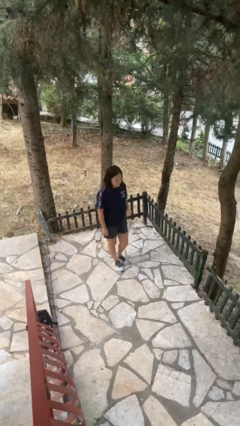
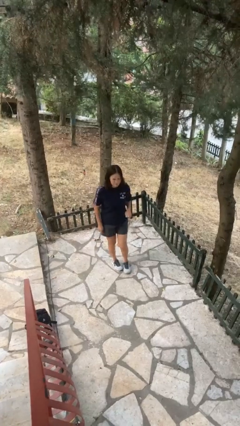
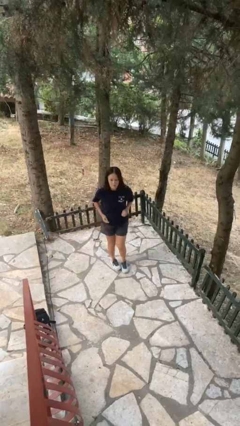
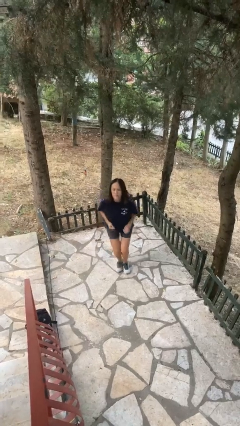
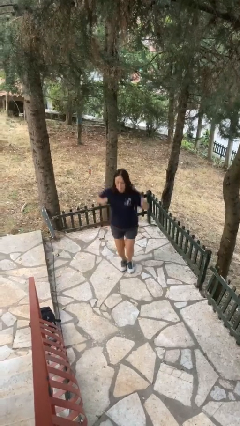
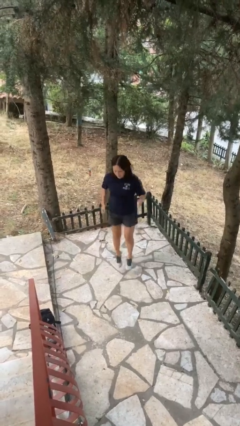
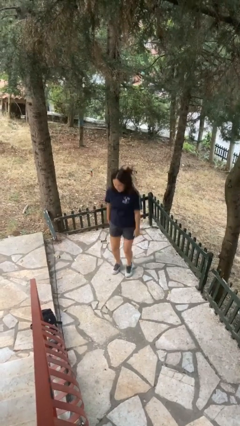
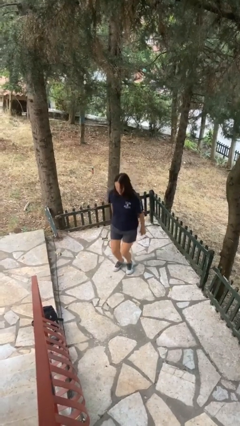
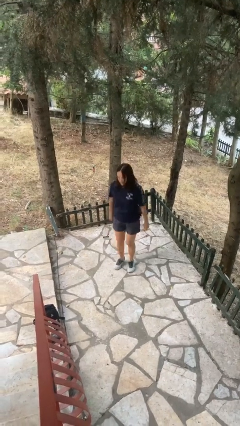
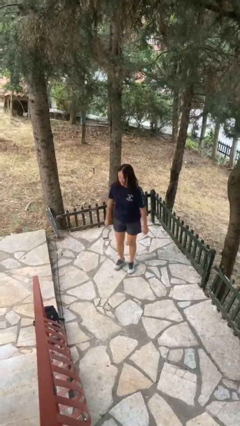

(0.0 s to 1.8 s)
person jumps

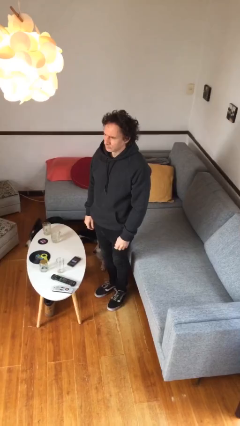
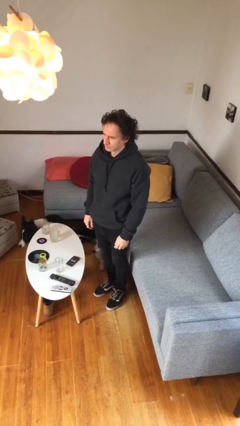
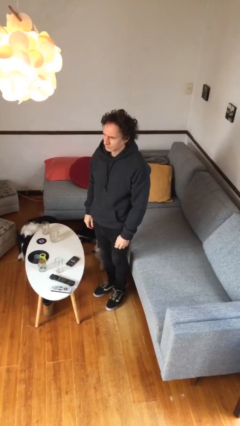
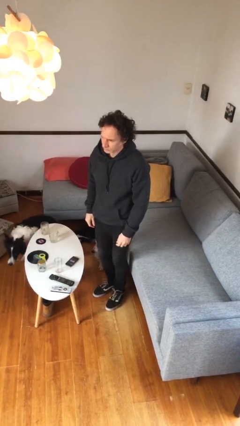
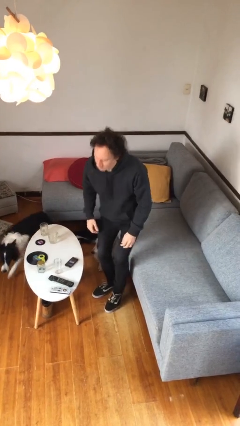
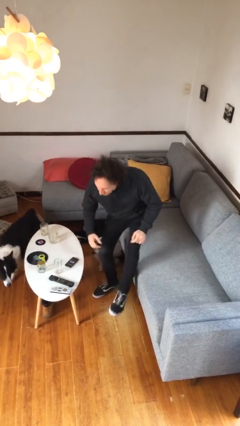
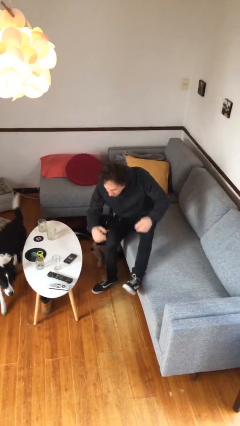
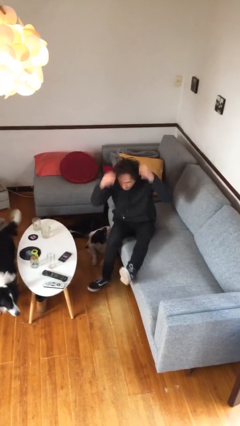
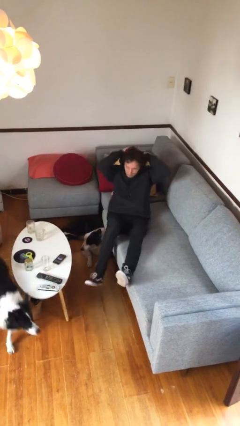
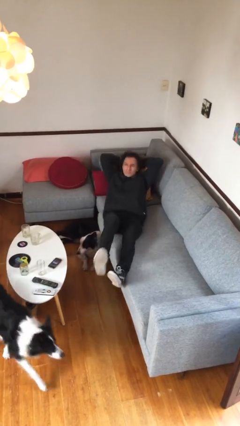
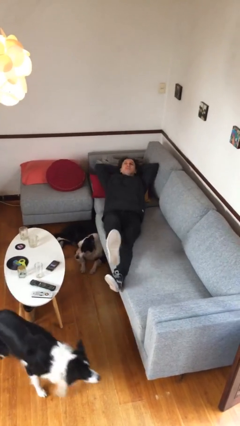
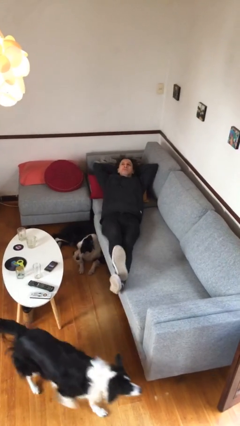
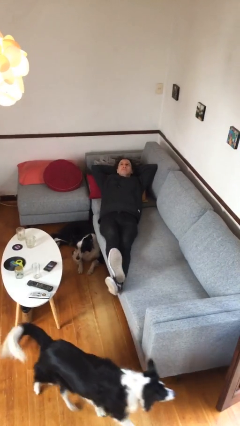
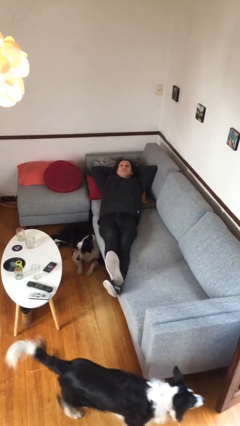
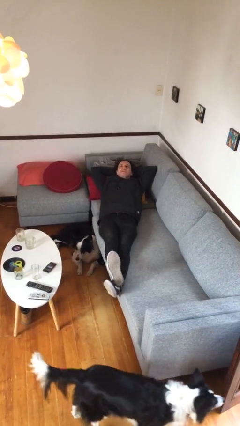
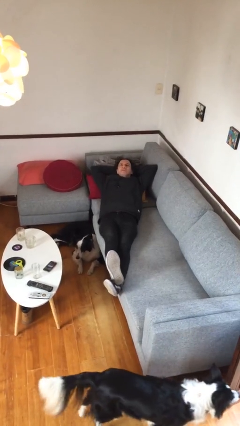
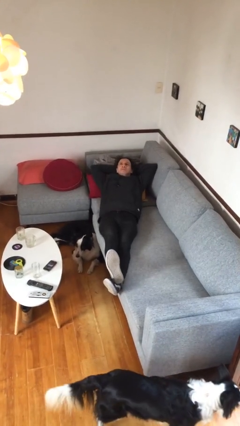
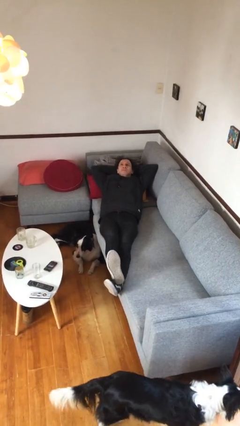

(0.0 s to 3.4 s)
person lies down on couch

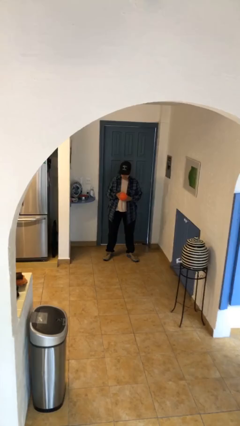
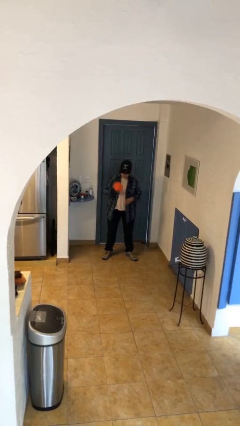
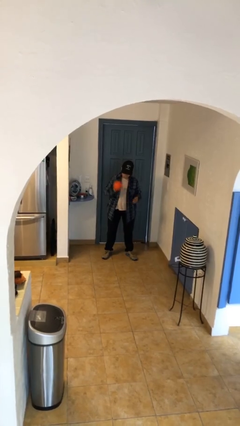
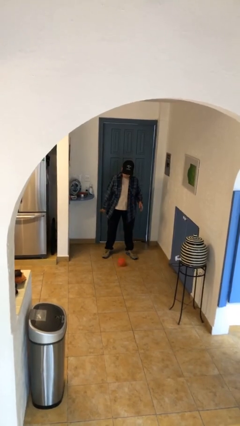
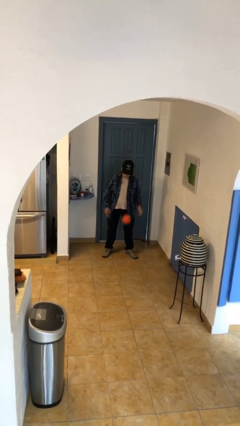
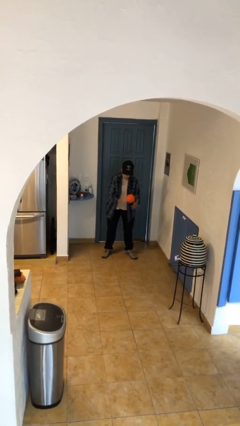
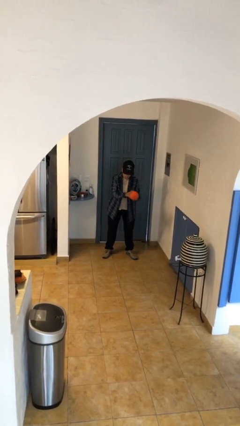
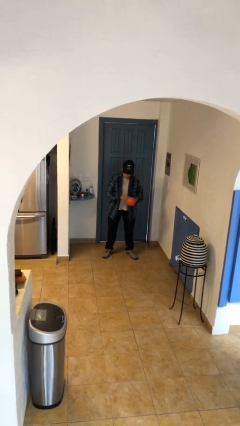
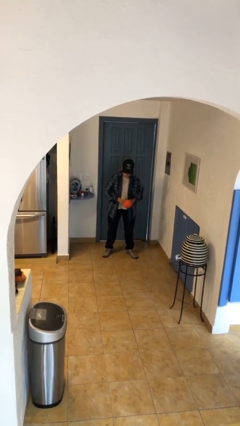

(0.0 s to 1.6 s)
person bounces ball on floor

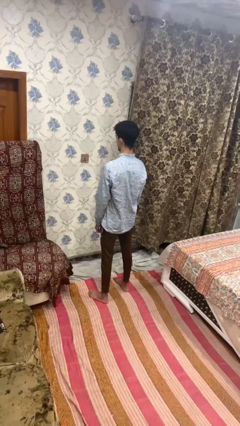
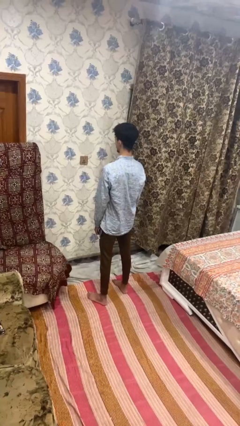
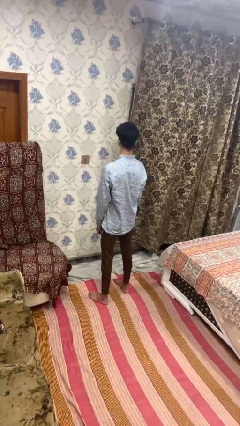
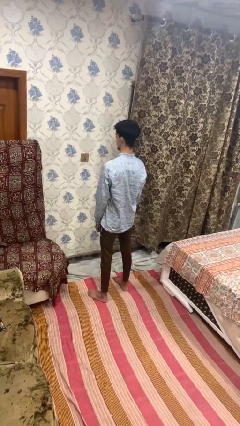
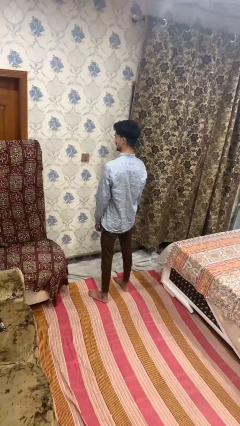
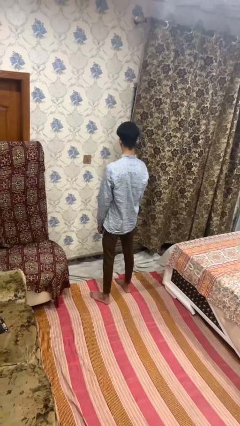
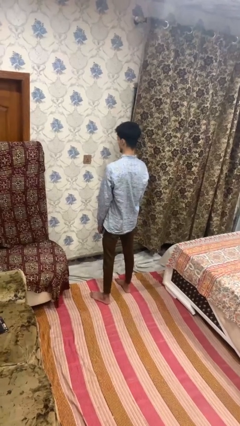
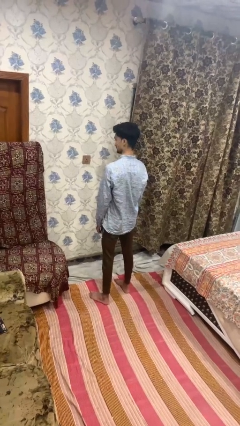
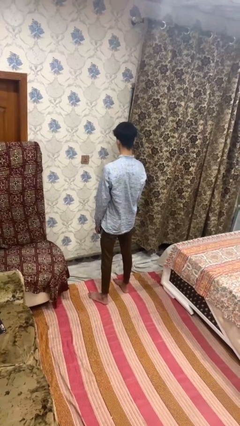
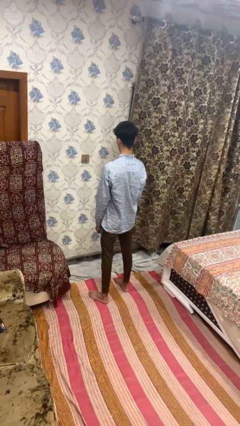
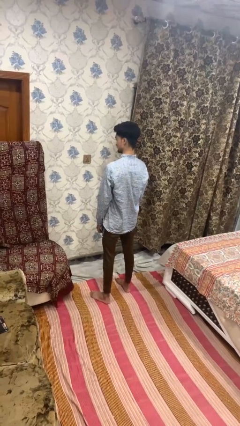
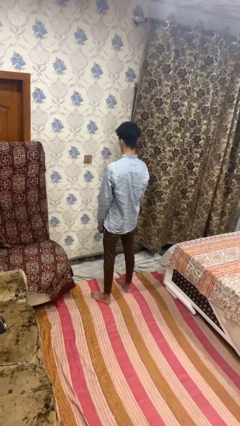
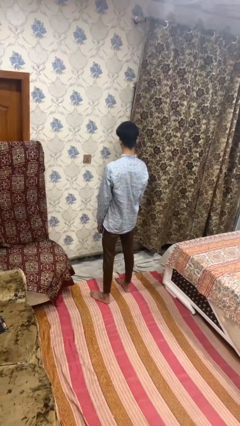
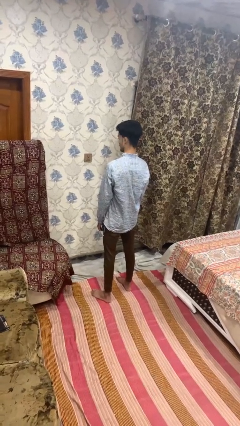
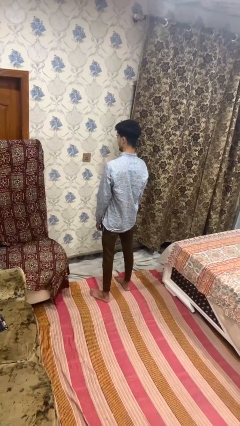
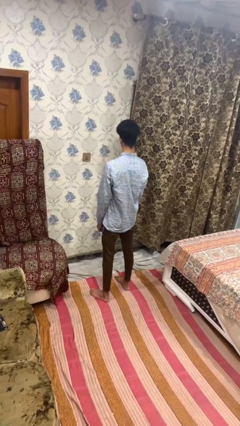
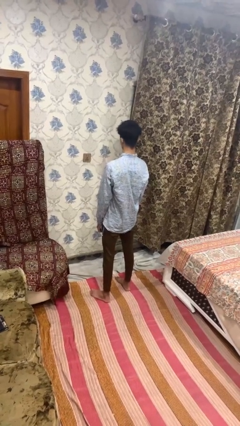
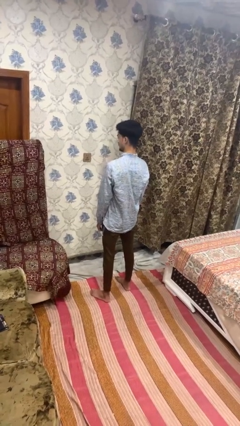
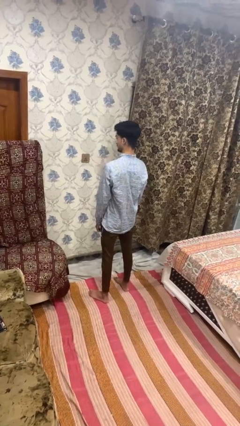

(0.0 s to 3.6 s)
person shakes head

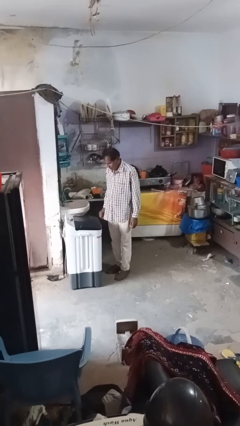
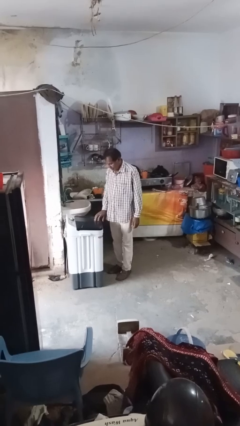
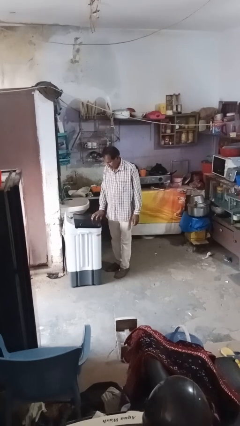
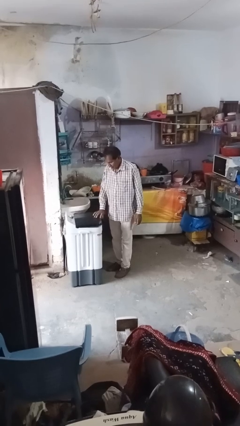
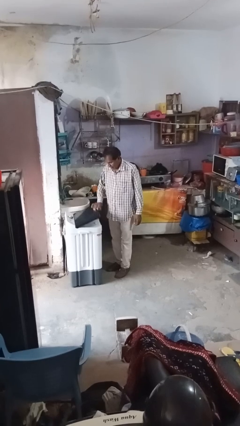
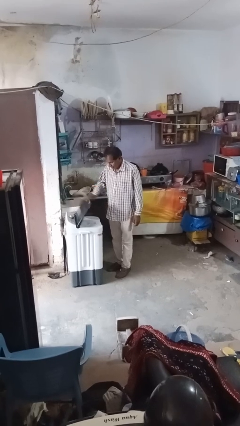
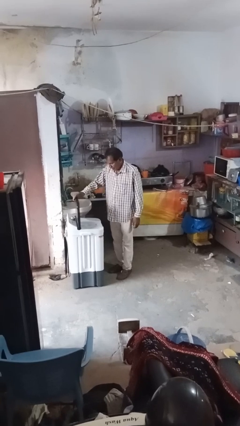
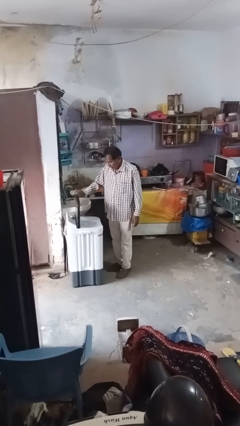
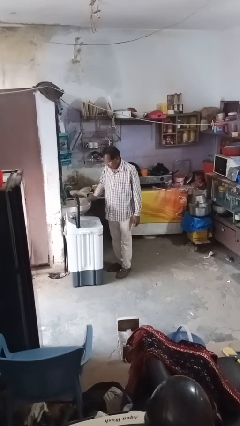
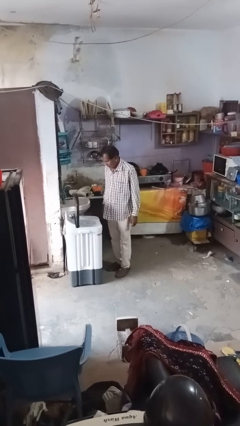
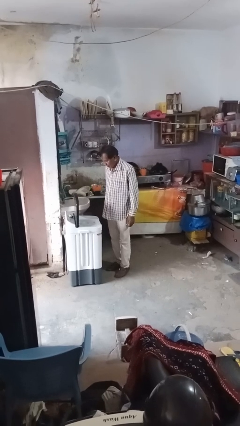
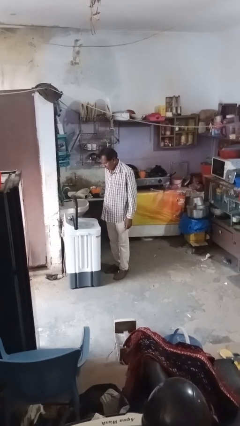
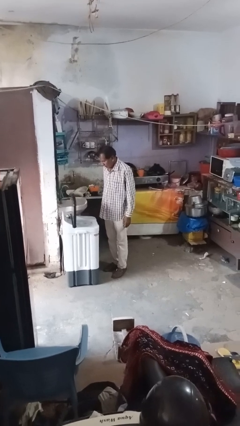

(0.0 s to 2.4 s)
person opens clothes washer

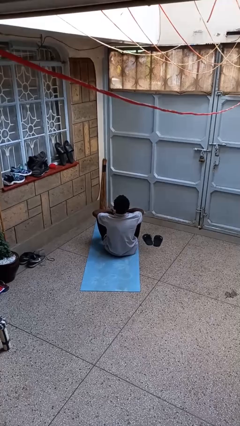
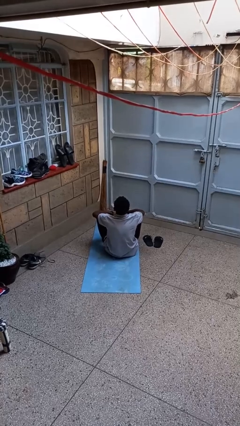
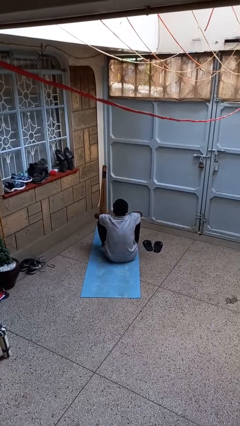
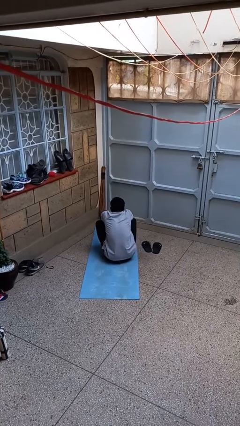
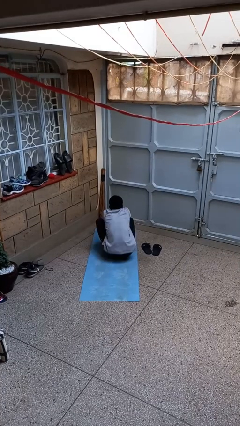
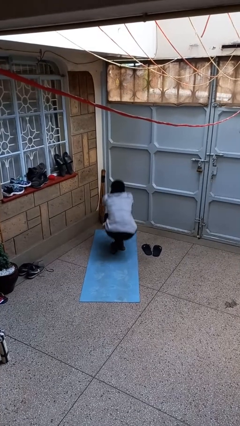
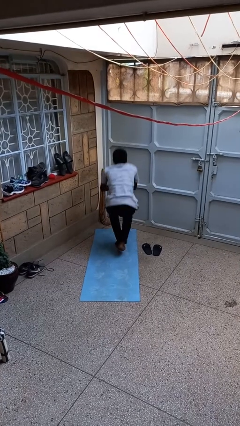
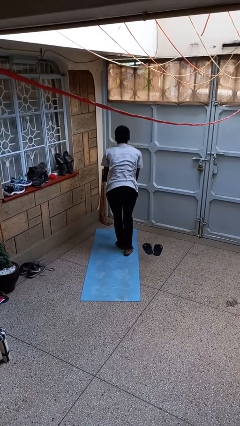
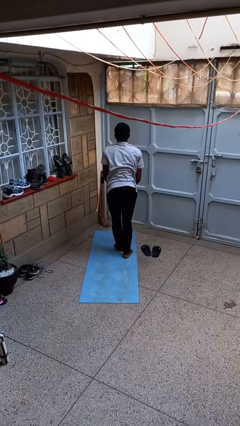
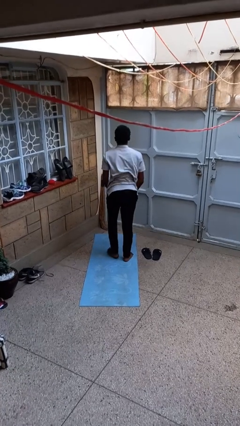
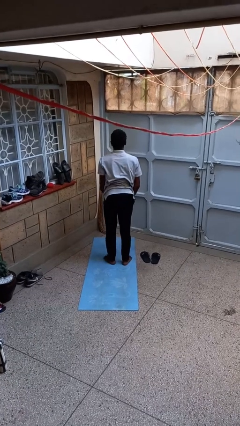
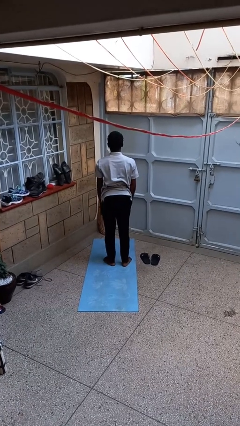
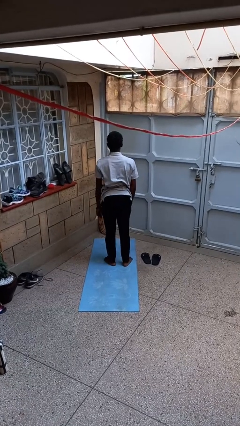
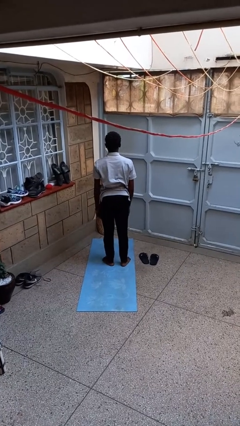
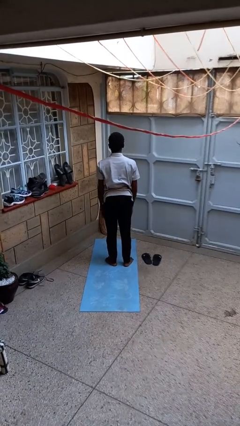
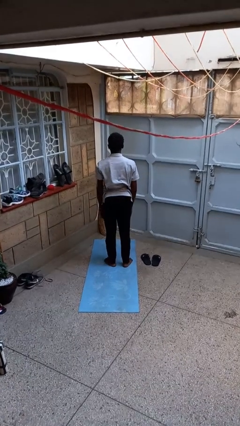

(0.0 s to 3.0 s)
person stands up from floor

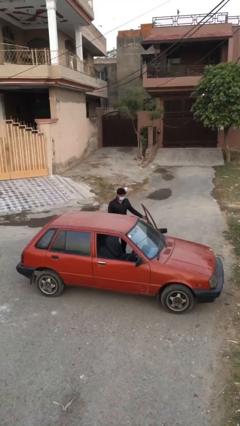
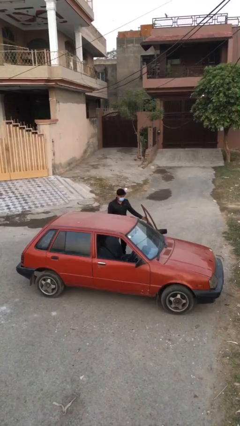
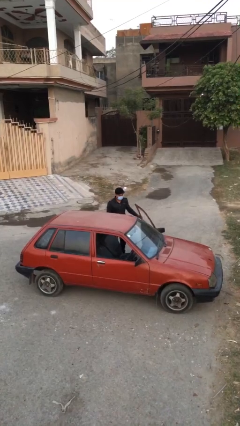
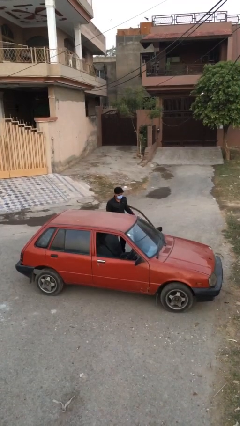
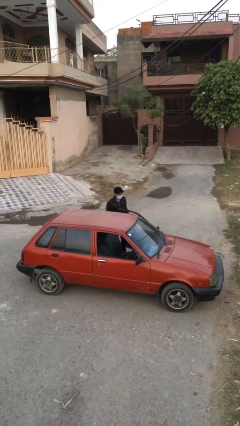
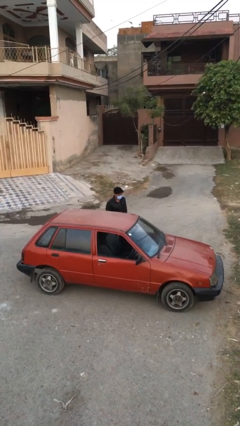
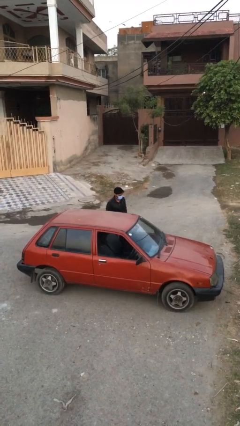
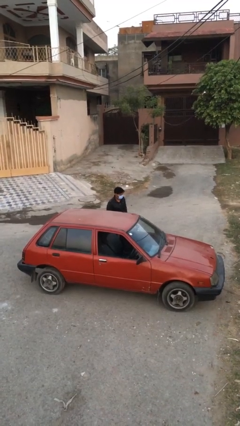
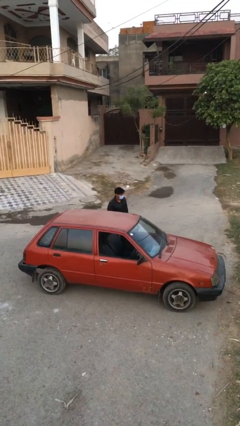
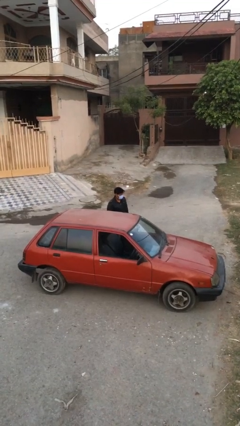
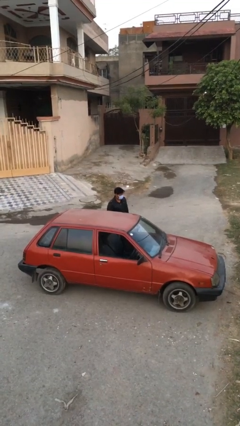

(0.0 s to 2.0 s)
person closes car door
